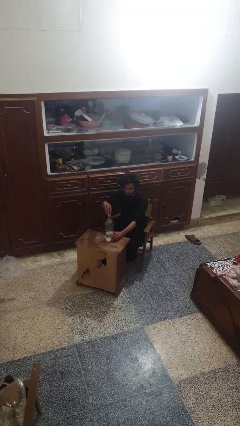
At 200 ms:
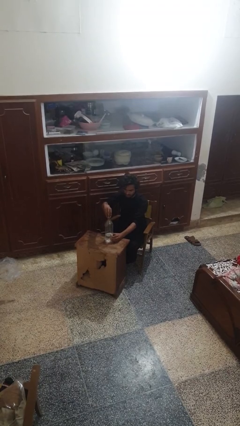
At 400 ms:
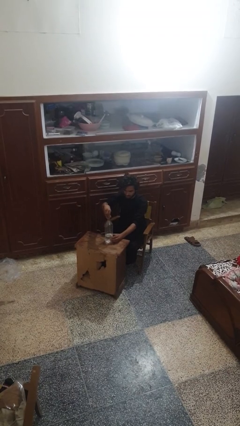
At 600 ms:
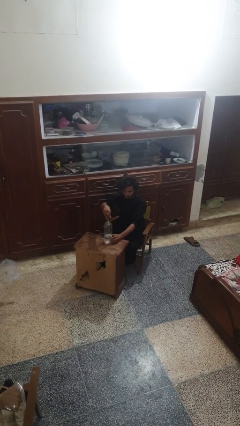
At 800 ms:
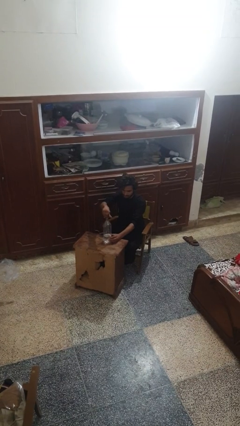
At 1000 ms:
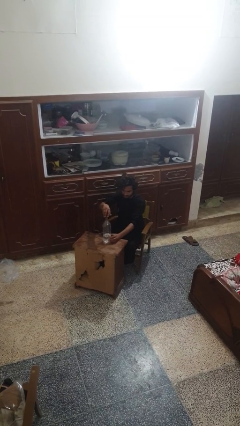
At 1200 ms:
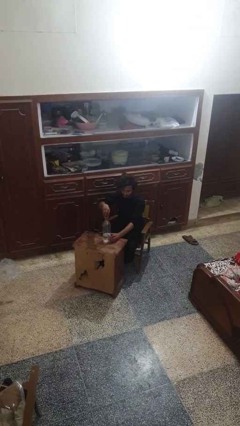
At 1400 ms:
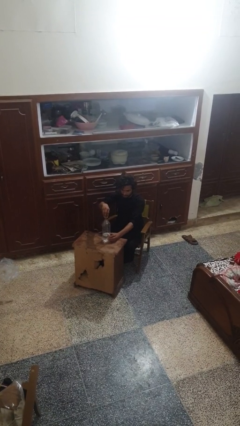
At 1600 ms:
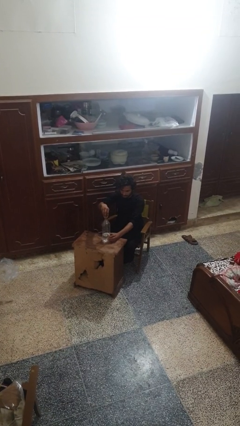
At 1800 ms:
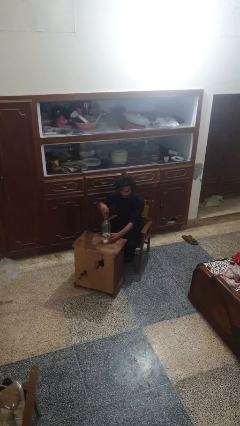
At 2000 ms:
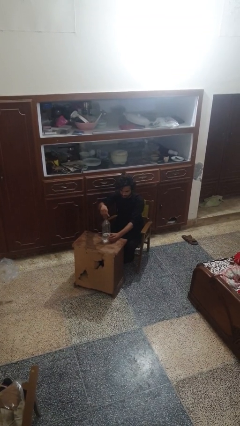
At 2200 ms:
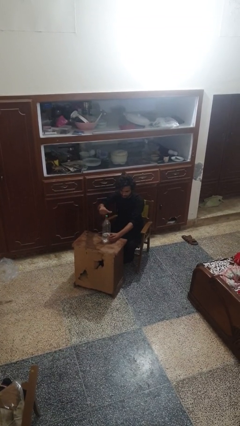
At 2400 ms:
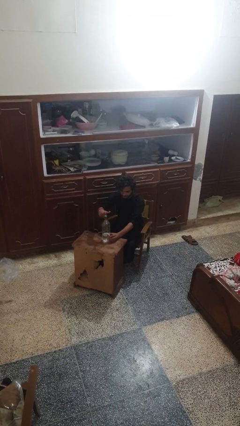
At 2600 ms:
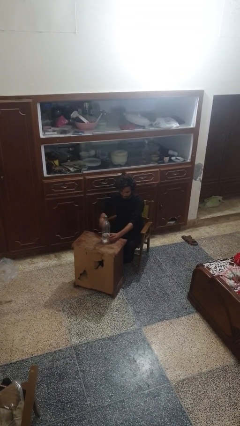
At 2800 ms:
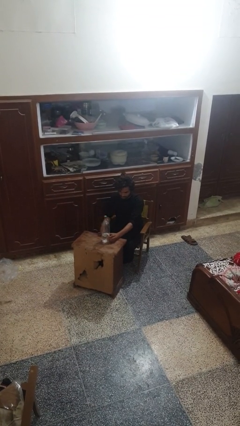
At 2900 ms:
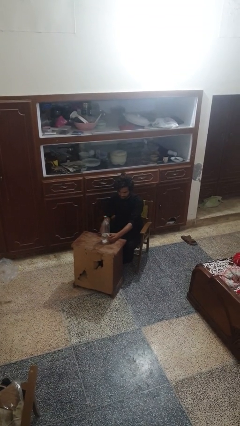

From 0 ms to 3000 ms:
person screws lid to bottle

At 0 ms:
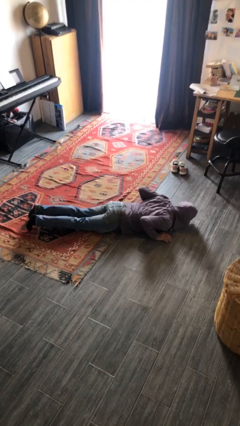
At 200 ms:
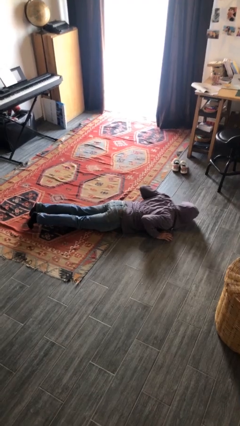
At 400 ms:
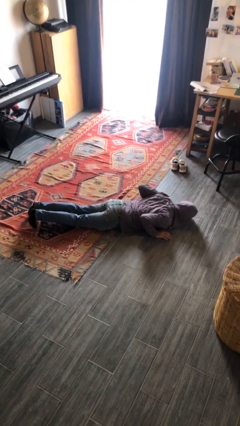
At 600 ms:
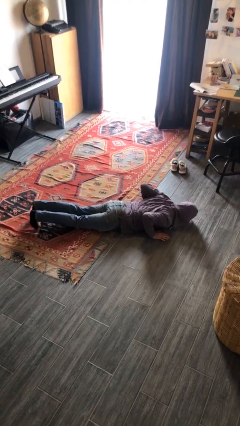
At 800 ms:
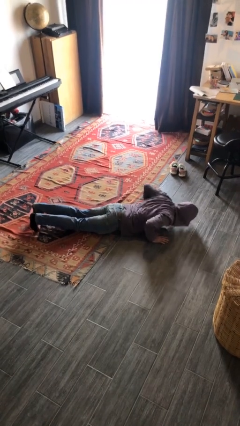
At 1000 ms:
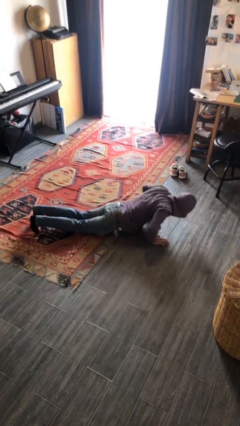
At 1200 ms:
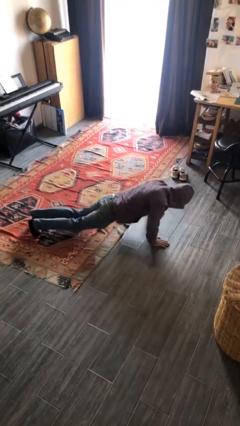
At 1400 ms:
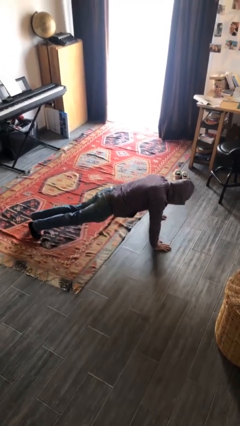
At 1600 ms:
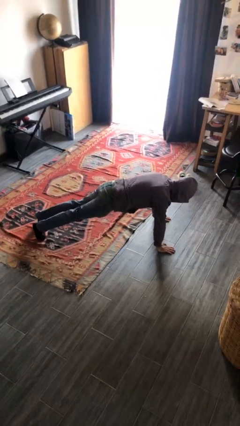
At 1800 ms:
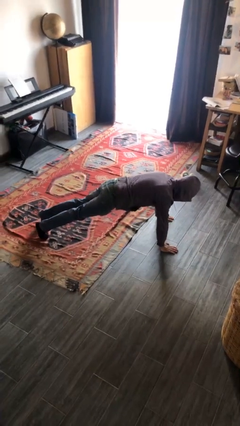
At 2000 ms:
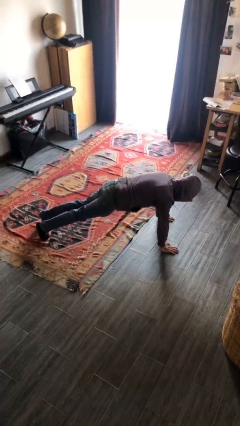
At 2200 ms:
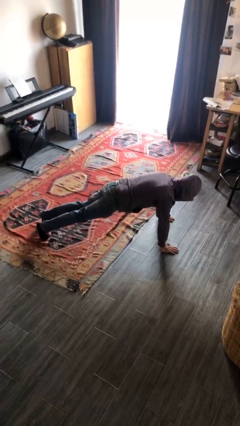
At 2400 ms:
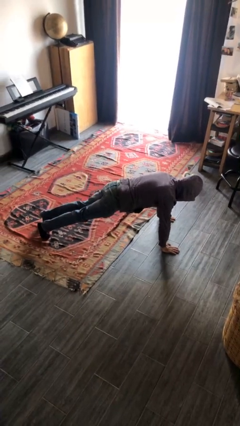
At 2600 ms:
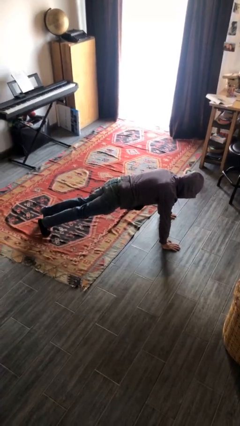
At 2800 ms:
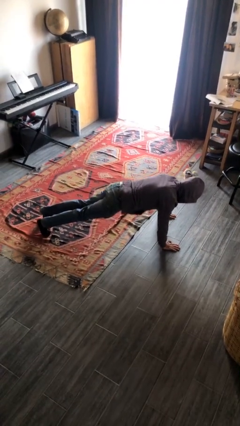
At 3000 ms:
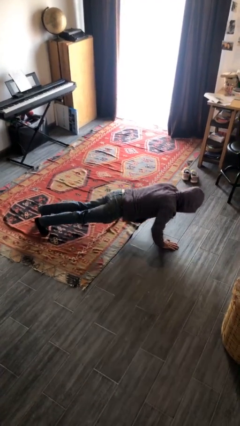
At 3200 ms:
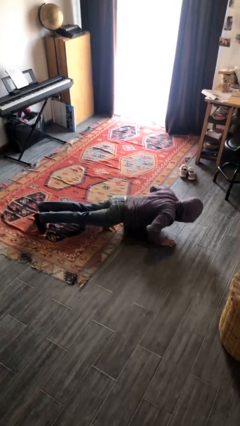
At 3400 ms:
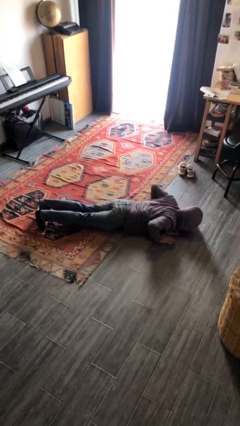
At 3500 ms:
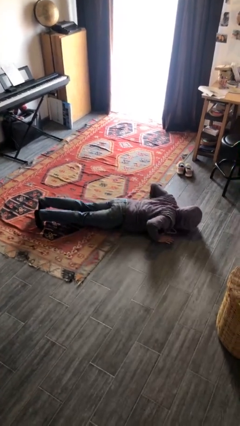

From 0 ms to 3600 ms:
person exercises with pushup

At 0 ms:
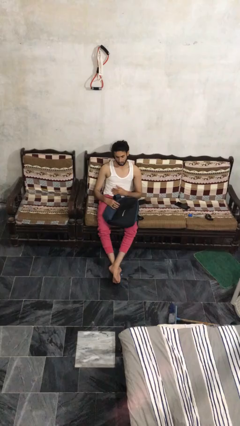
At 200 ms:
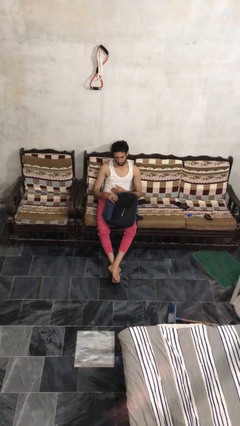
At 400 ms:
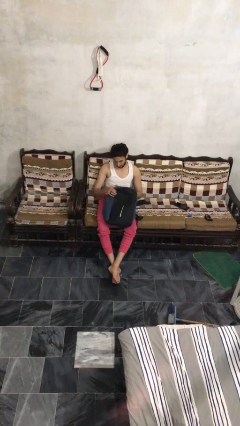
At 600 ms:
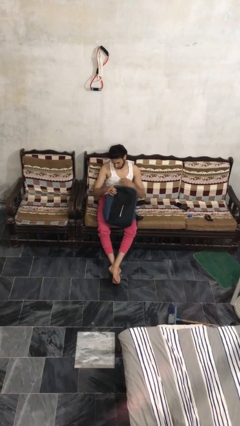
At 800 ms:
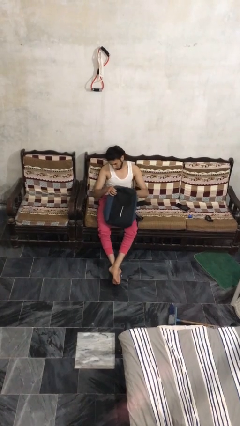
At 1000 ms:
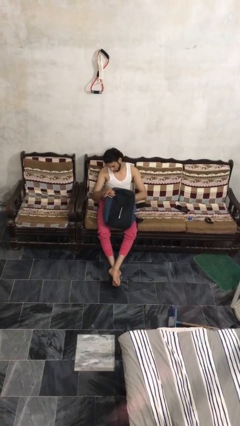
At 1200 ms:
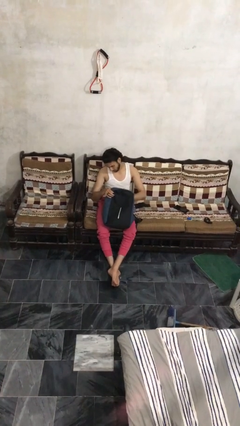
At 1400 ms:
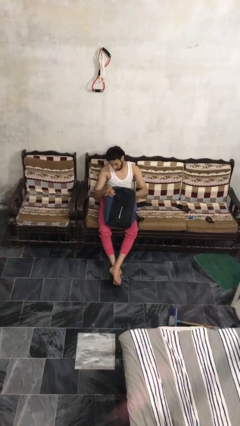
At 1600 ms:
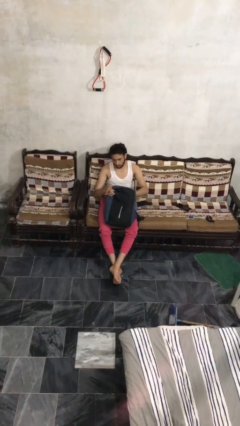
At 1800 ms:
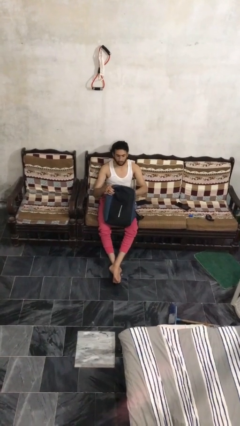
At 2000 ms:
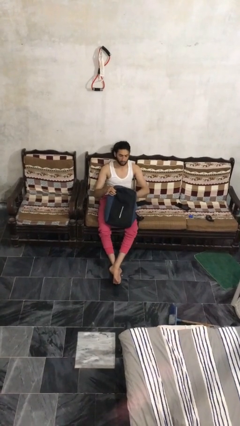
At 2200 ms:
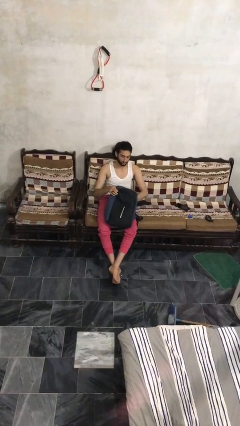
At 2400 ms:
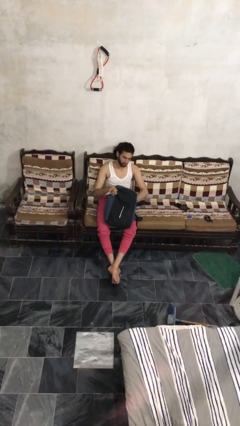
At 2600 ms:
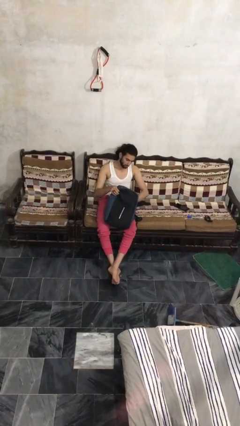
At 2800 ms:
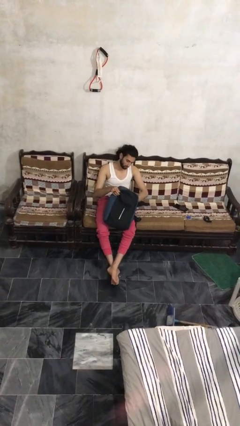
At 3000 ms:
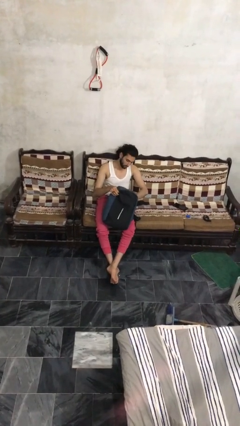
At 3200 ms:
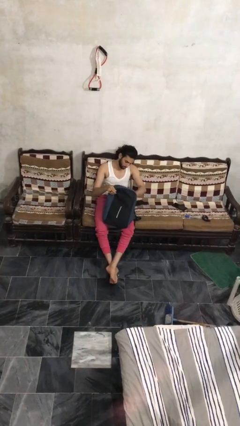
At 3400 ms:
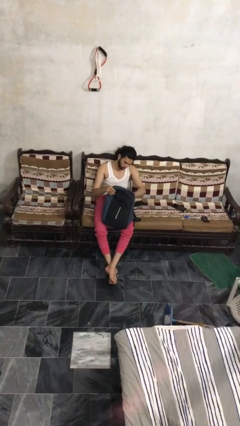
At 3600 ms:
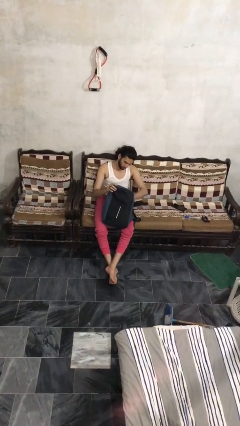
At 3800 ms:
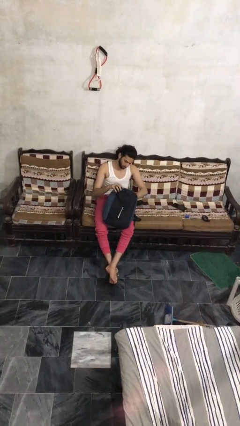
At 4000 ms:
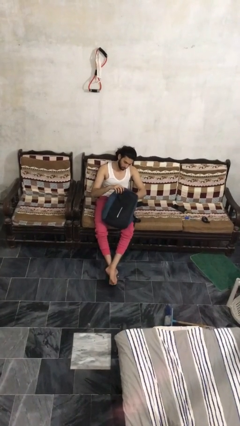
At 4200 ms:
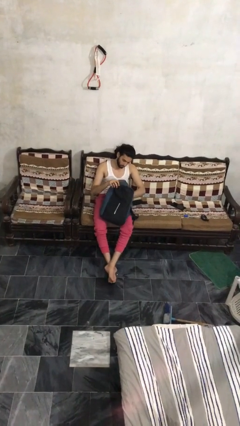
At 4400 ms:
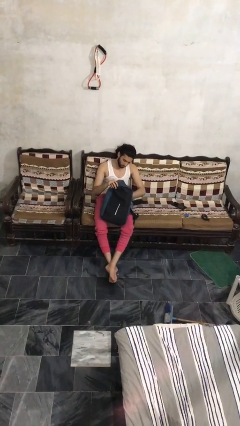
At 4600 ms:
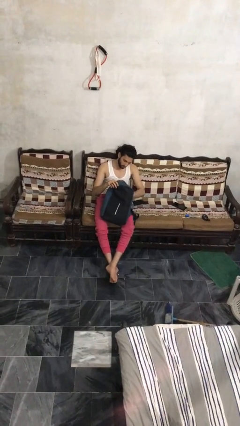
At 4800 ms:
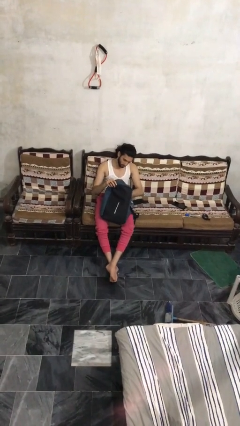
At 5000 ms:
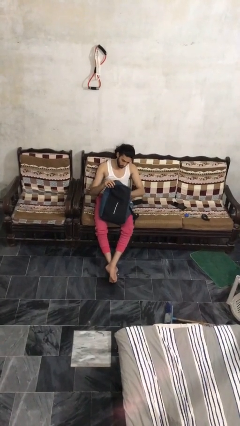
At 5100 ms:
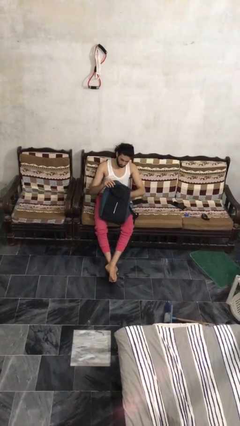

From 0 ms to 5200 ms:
person searches in backpack

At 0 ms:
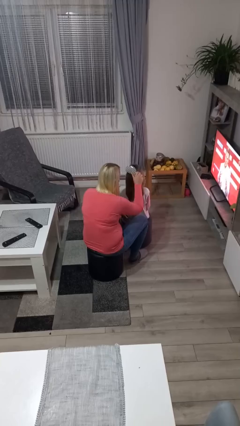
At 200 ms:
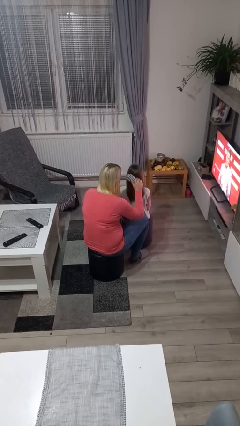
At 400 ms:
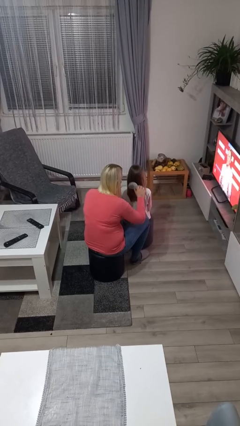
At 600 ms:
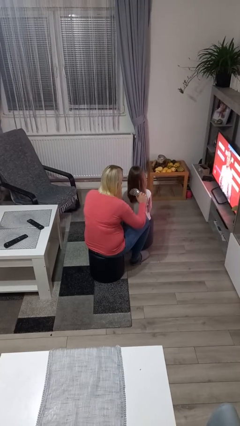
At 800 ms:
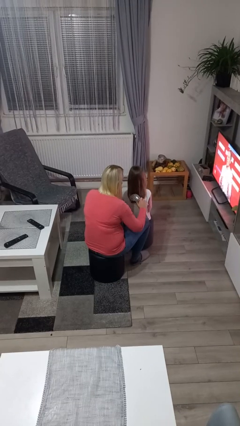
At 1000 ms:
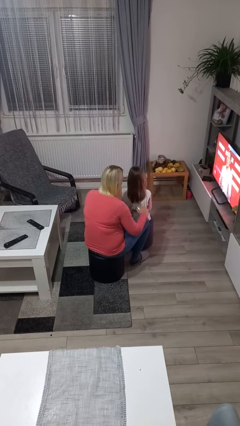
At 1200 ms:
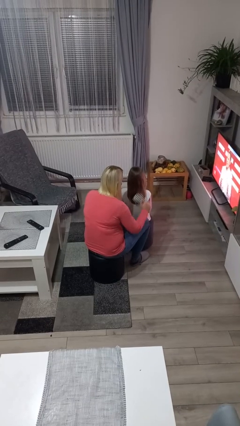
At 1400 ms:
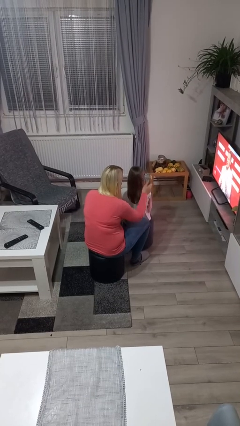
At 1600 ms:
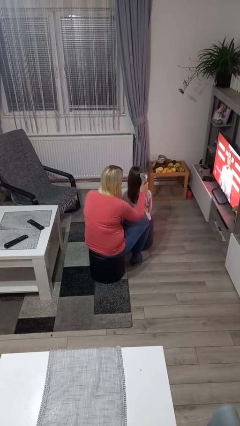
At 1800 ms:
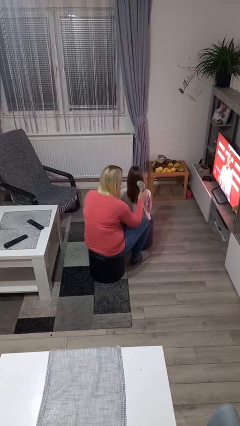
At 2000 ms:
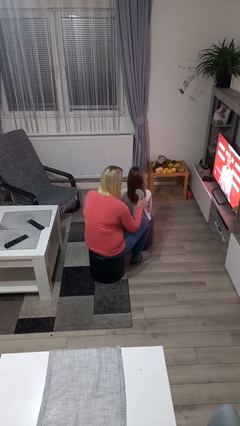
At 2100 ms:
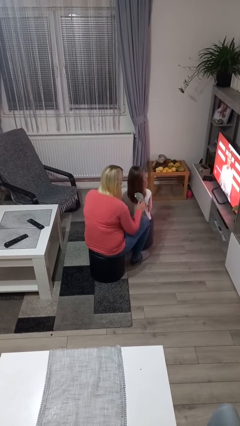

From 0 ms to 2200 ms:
person brushes hair of person

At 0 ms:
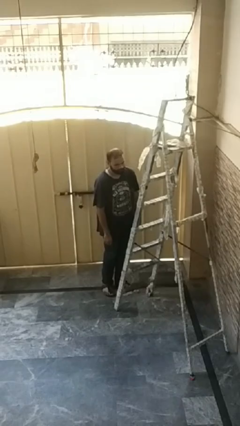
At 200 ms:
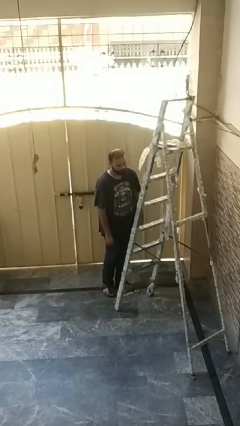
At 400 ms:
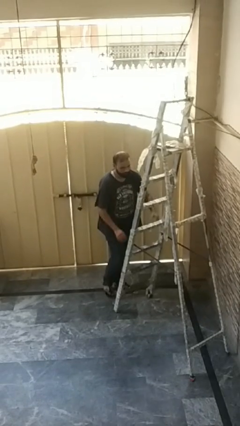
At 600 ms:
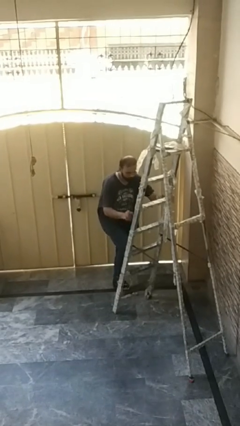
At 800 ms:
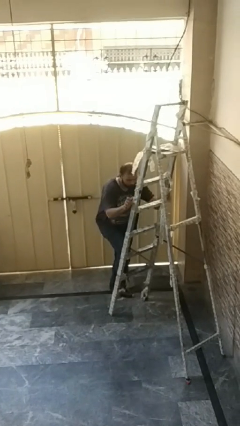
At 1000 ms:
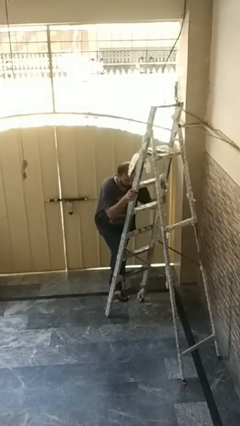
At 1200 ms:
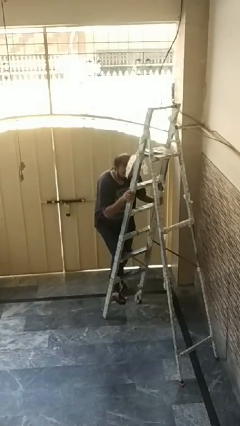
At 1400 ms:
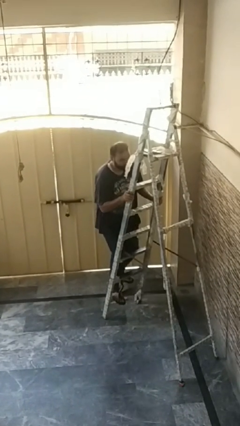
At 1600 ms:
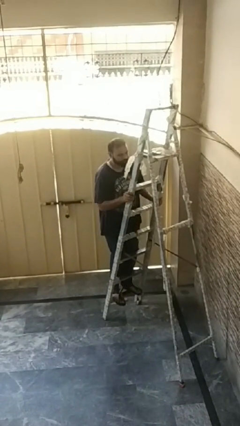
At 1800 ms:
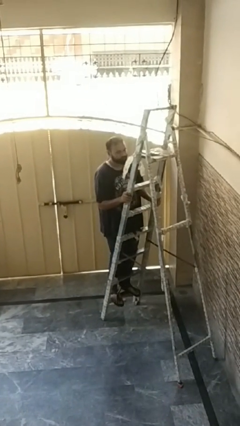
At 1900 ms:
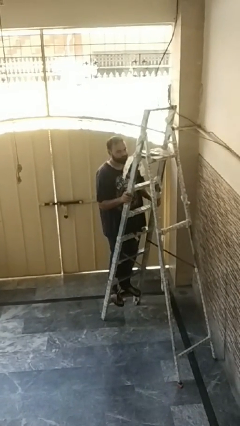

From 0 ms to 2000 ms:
person climbs up ladder

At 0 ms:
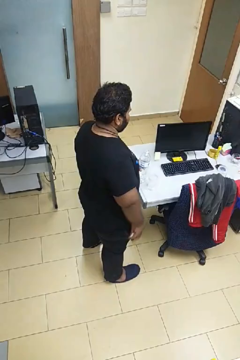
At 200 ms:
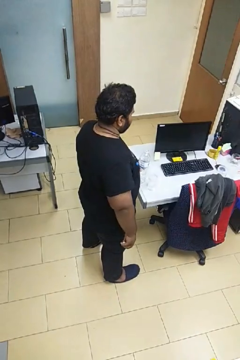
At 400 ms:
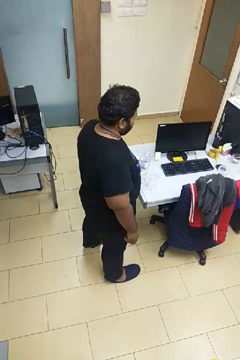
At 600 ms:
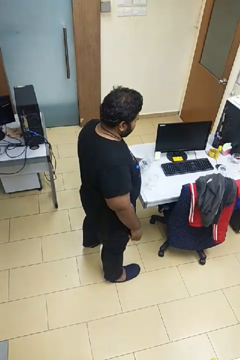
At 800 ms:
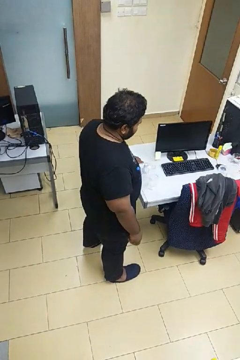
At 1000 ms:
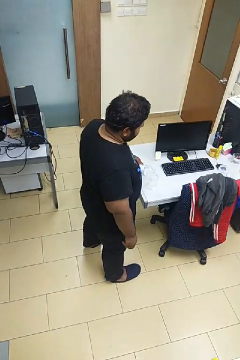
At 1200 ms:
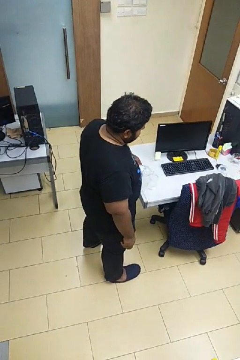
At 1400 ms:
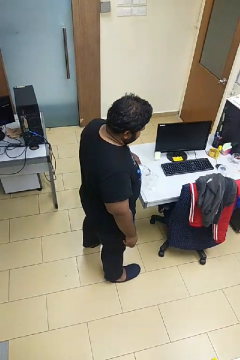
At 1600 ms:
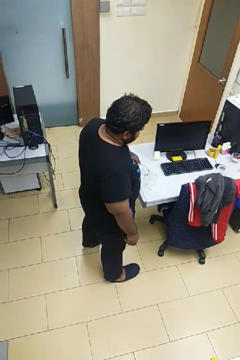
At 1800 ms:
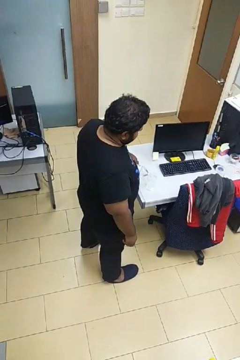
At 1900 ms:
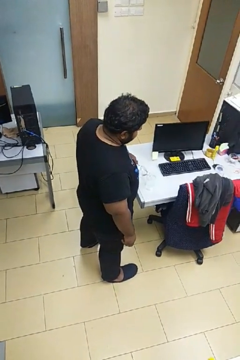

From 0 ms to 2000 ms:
person pours liquid into cup

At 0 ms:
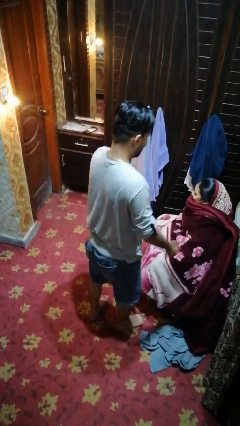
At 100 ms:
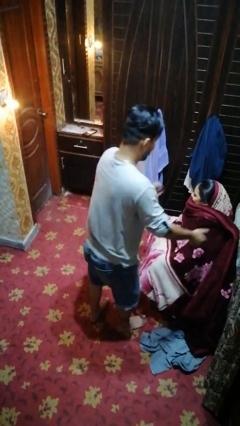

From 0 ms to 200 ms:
person covers friend with blanket
